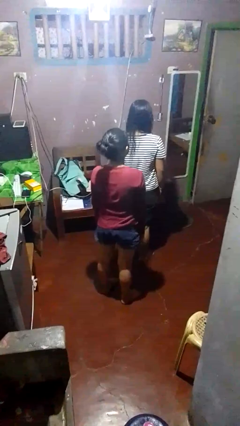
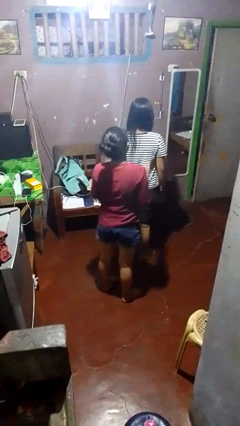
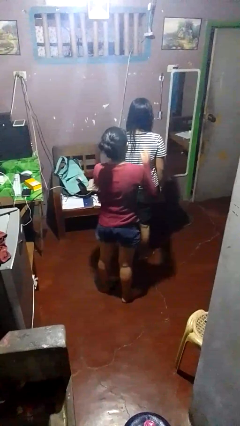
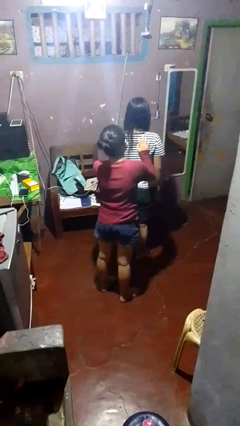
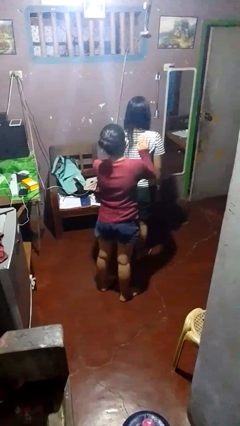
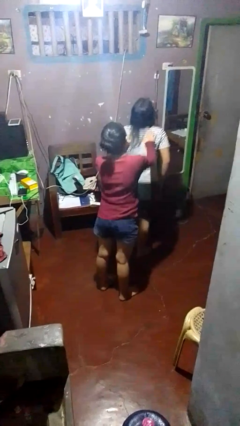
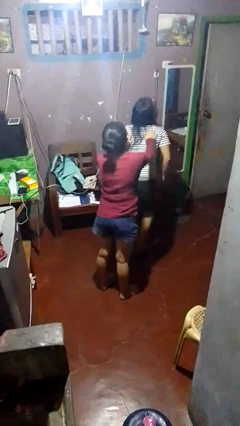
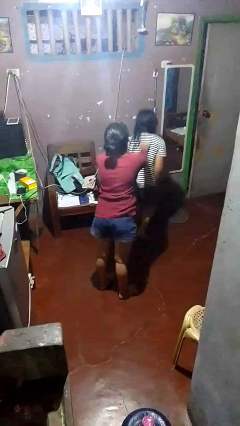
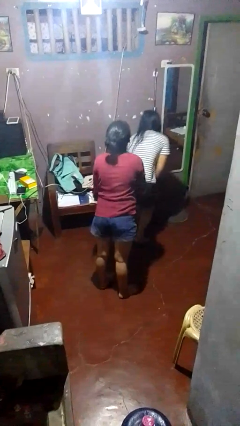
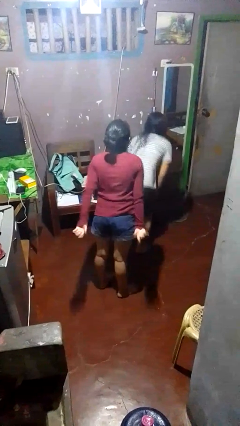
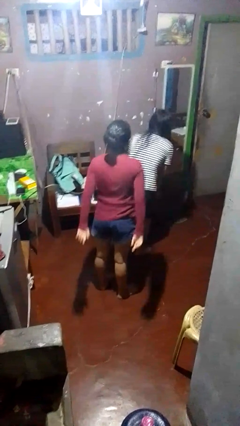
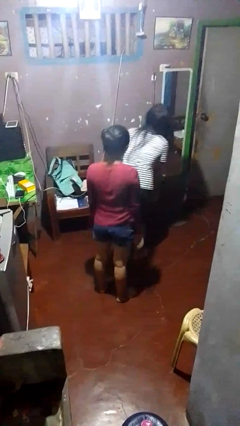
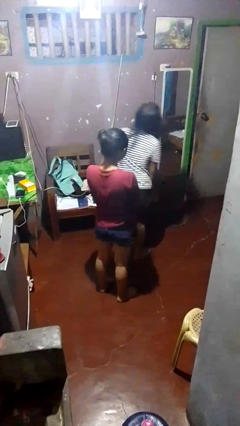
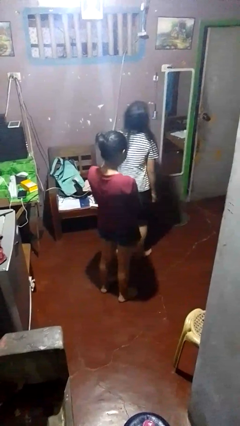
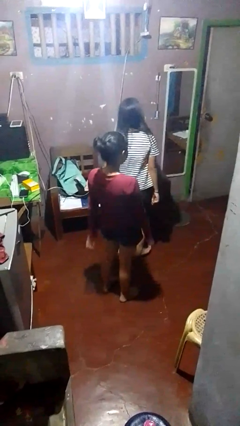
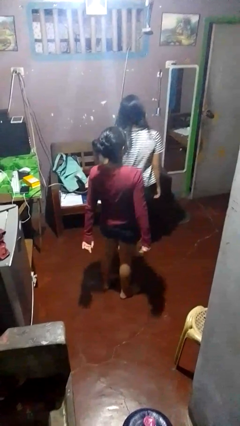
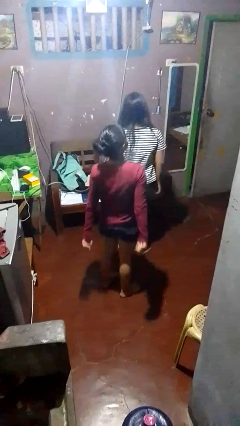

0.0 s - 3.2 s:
person shoves person

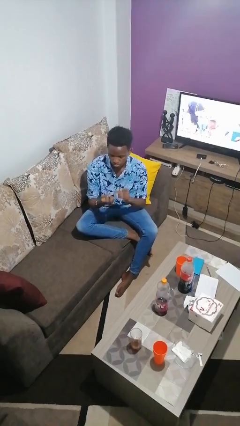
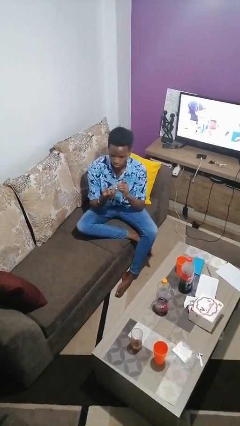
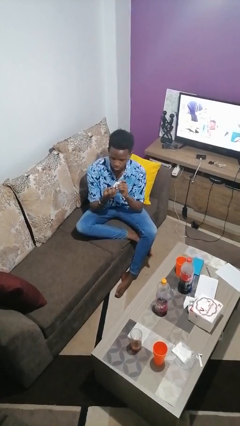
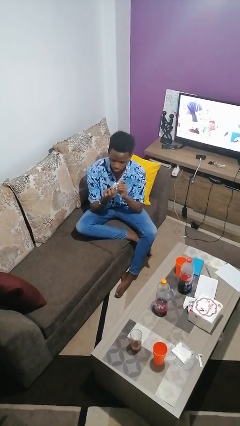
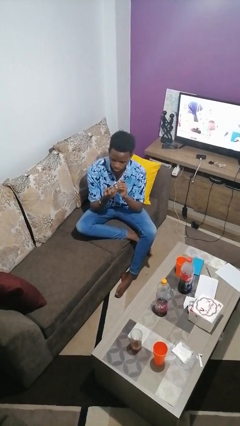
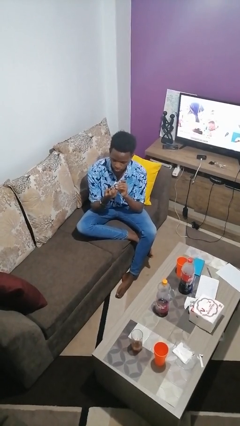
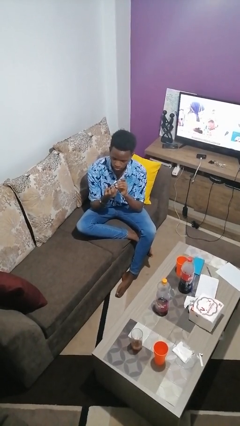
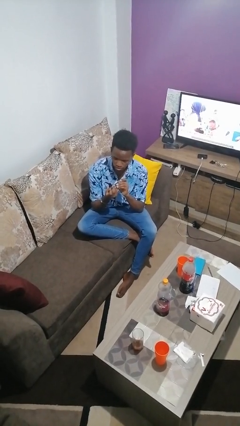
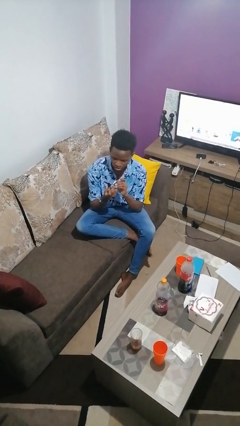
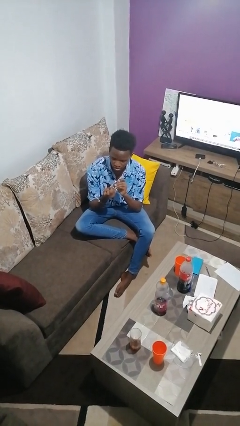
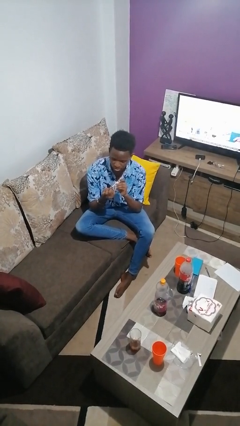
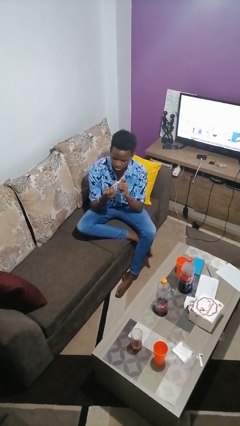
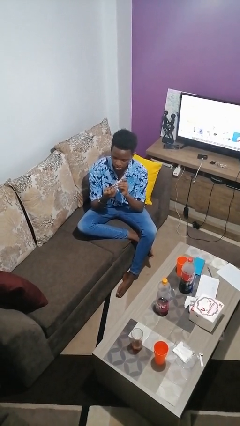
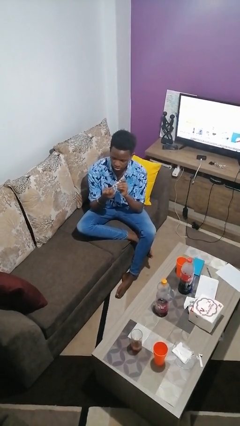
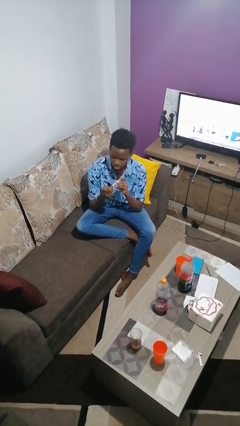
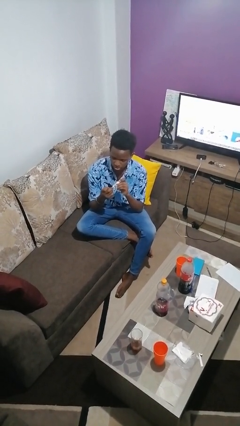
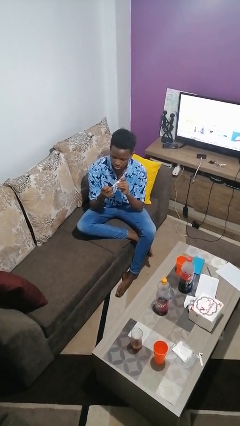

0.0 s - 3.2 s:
person clips fingernails

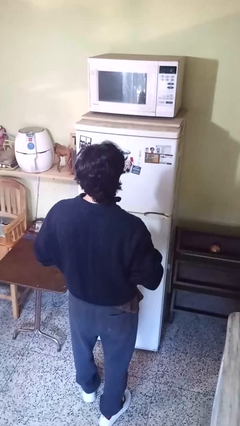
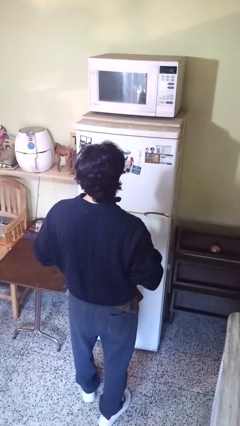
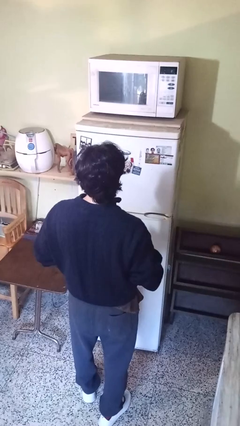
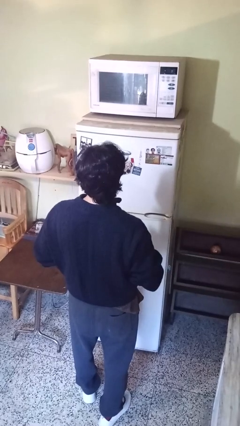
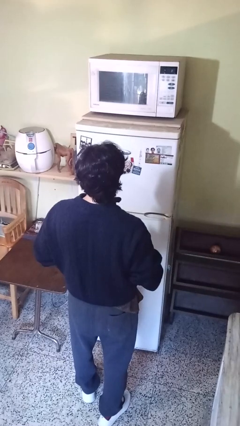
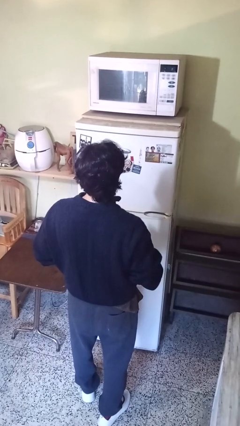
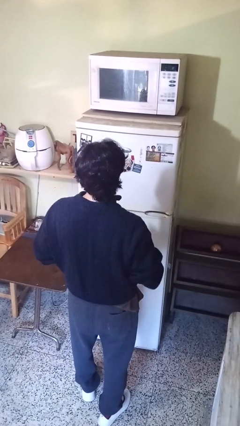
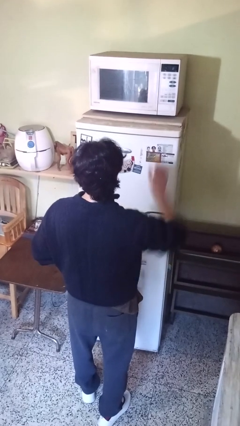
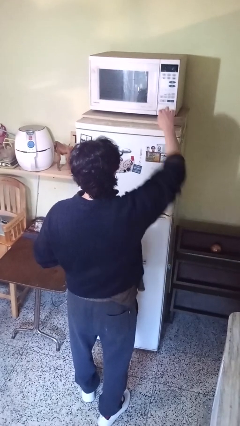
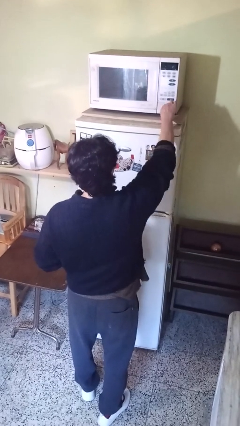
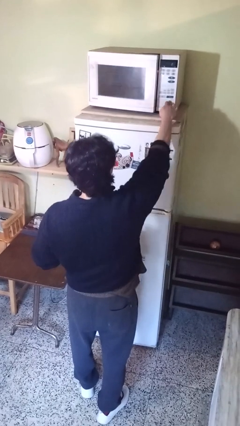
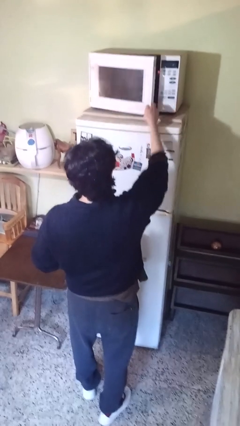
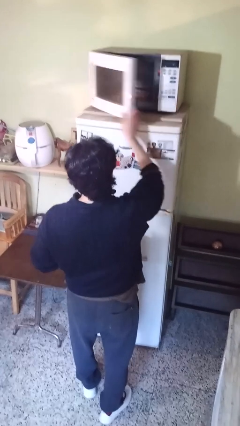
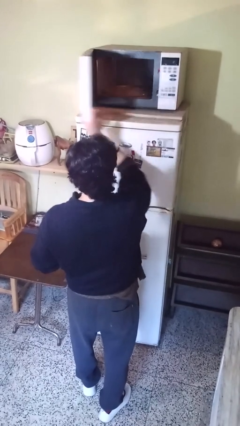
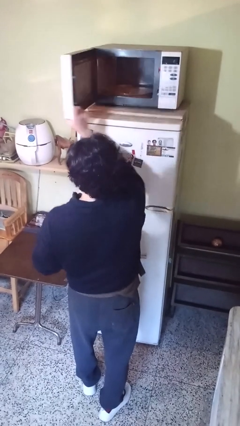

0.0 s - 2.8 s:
person opens microwave

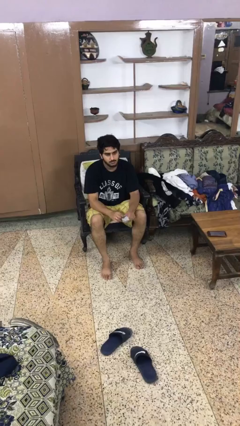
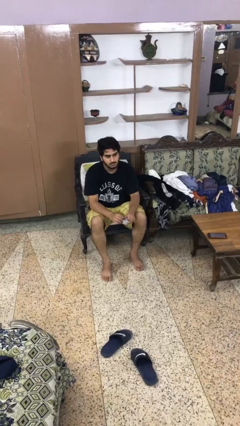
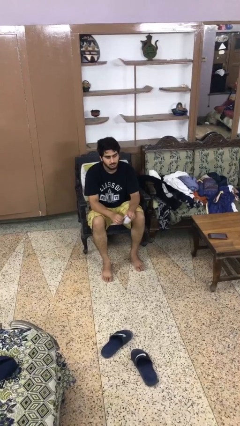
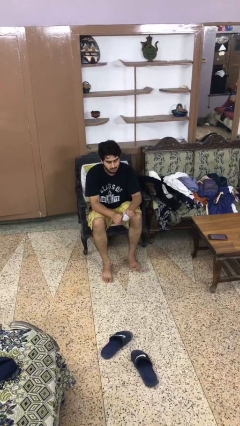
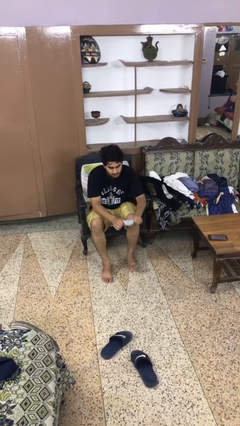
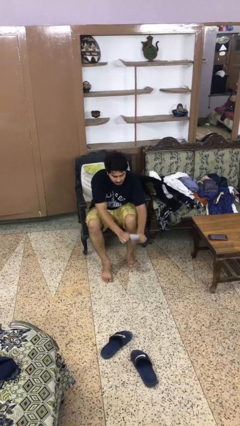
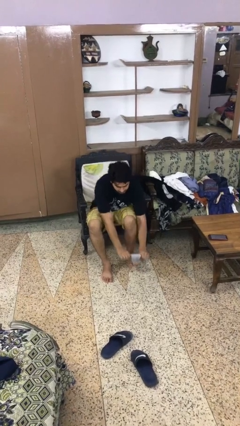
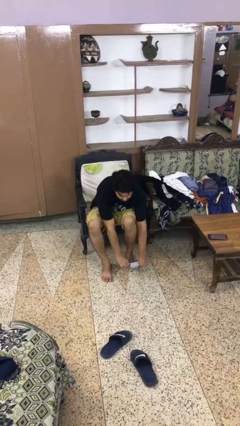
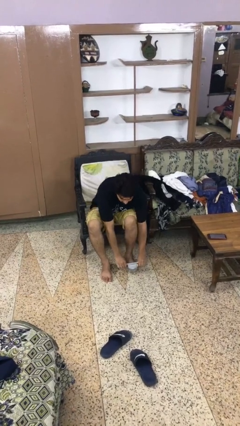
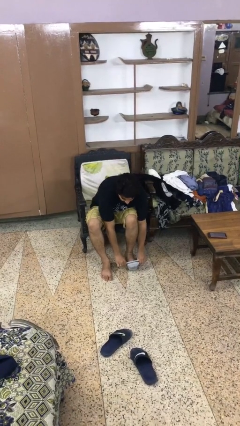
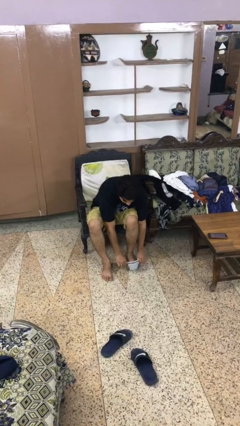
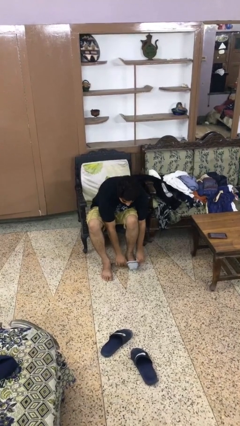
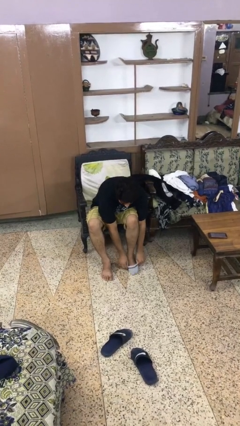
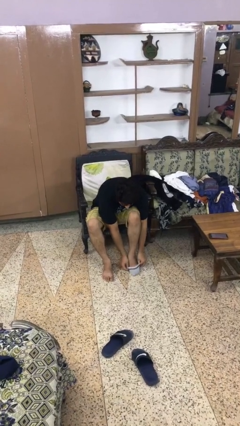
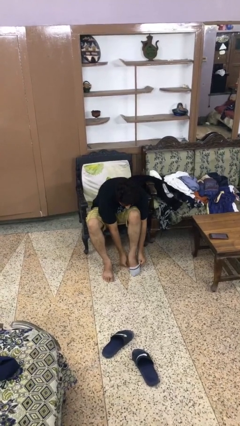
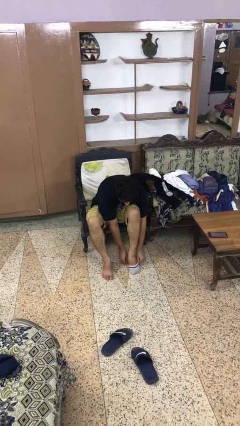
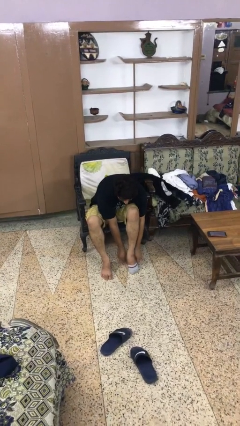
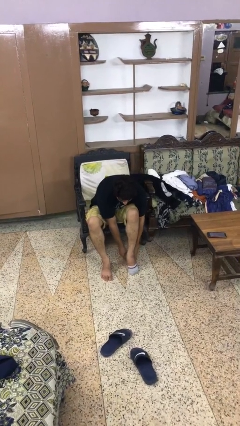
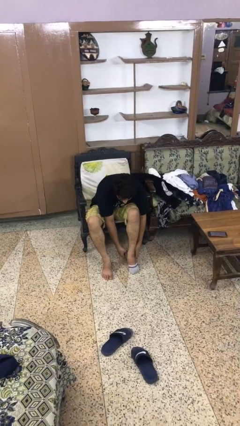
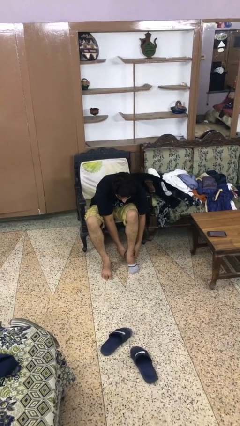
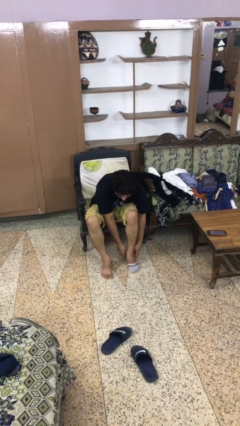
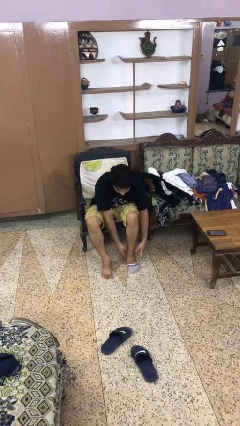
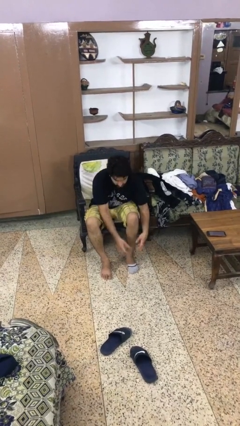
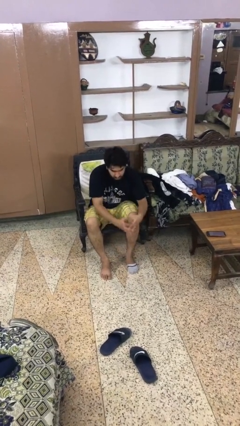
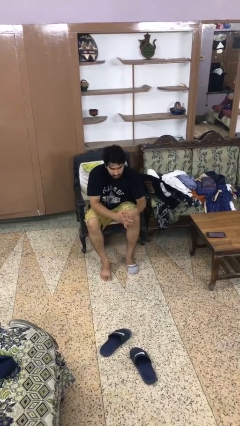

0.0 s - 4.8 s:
person puts on socks

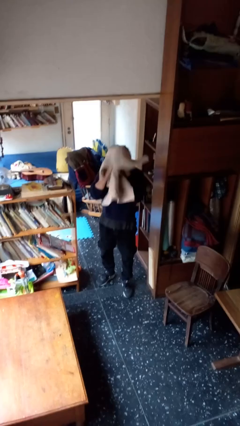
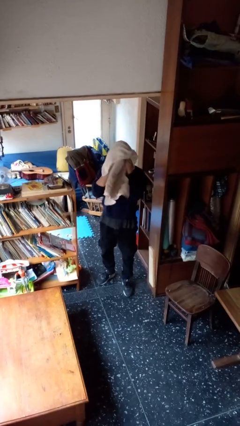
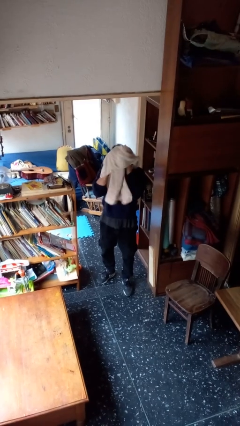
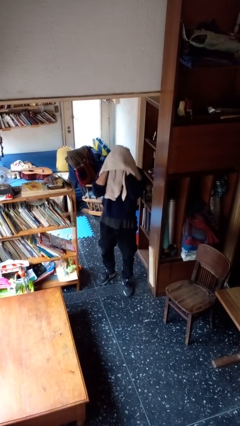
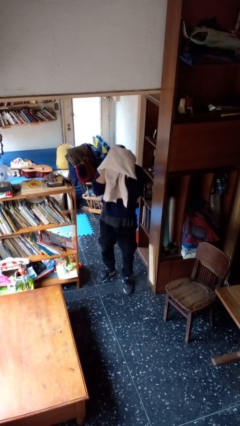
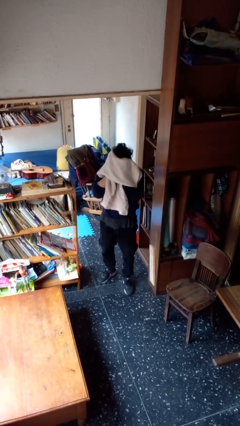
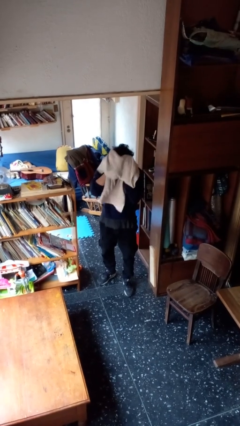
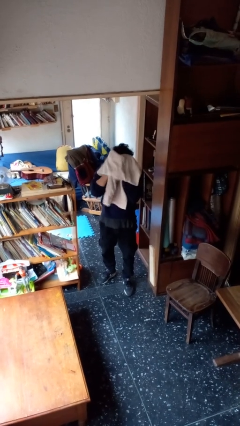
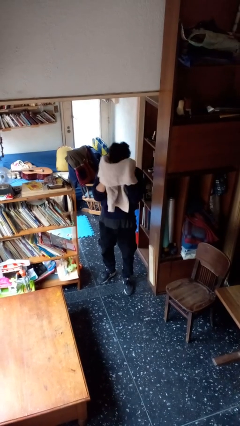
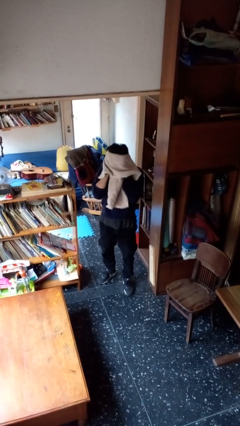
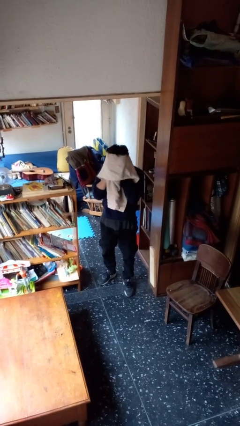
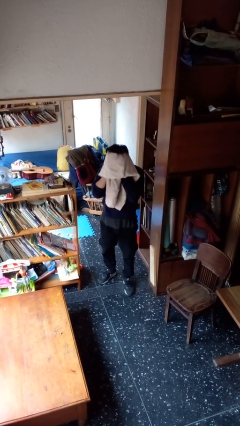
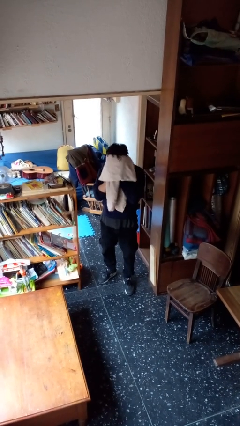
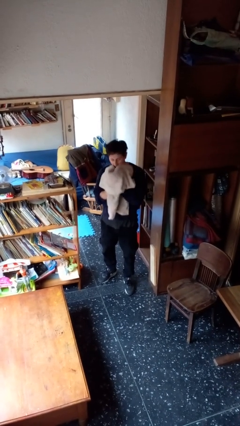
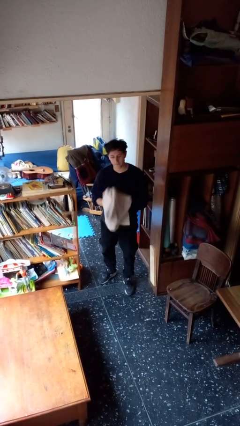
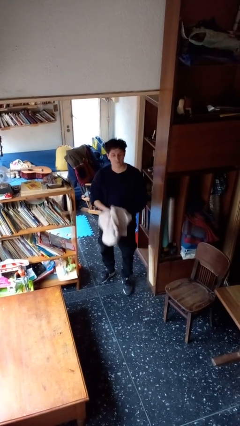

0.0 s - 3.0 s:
person dries hair with towel
